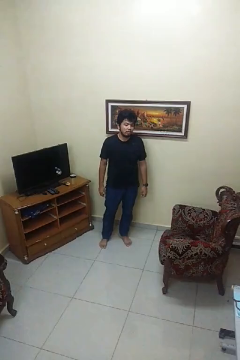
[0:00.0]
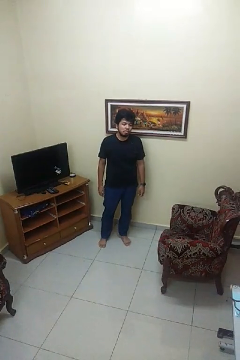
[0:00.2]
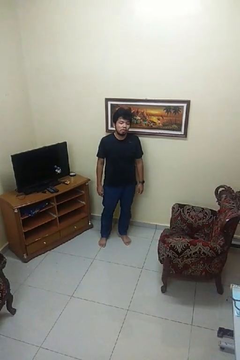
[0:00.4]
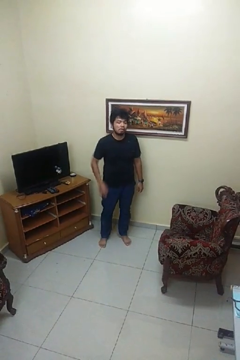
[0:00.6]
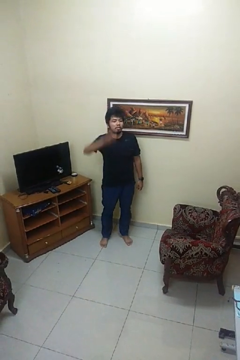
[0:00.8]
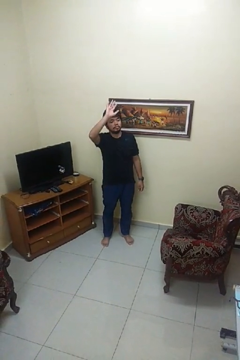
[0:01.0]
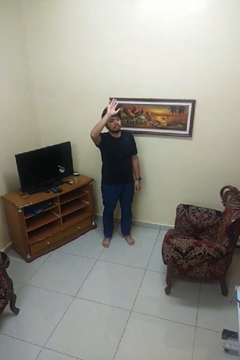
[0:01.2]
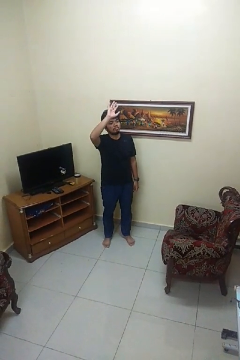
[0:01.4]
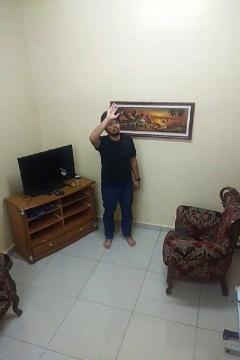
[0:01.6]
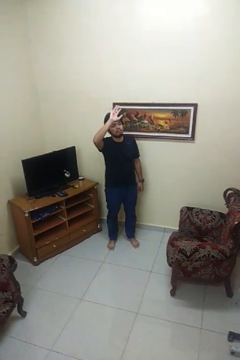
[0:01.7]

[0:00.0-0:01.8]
person gestures raise hand

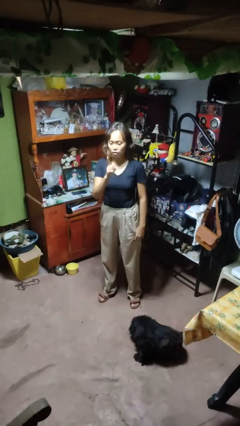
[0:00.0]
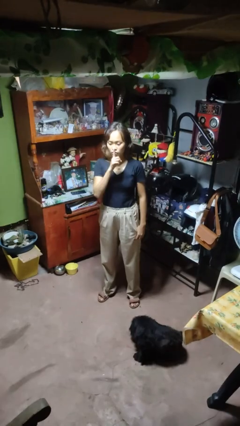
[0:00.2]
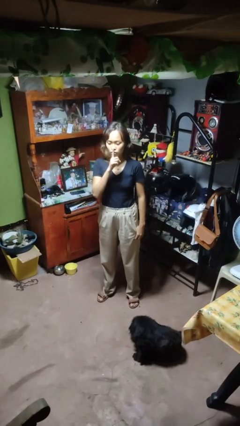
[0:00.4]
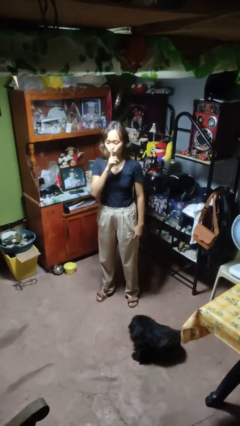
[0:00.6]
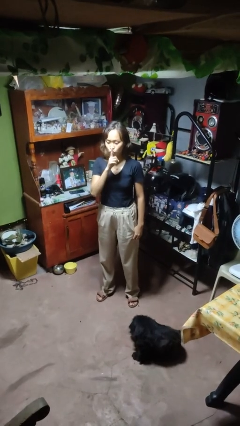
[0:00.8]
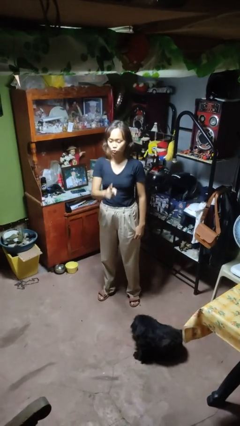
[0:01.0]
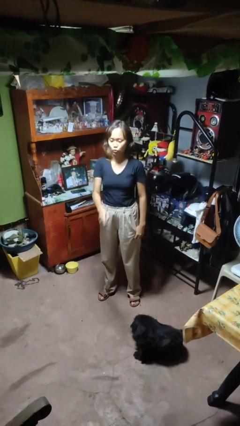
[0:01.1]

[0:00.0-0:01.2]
person gestures be quiet

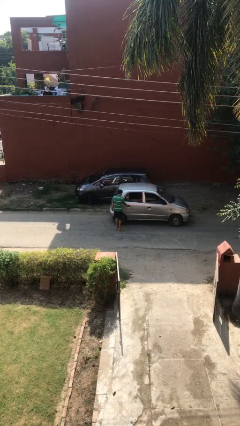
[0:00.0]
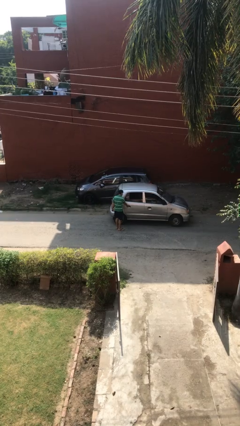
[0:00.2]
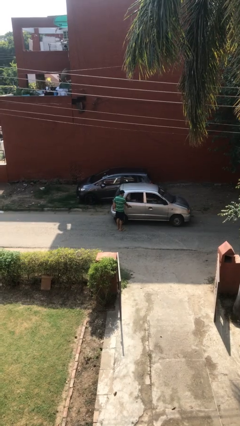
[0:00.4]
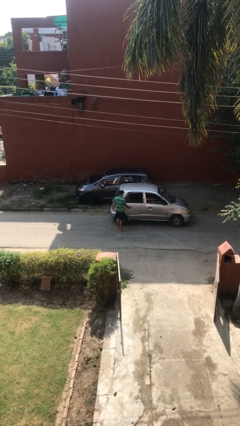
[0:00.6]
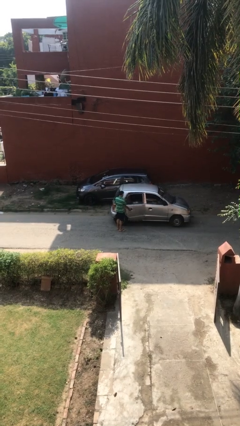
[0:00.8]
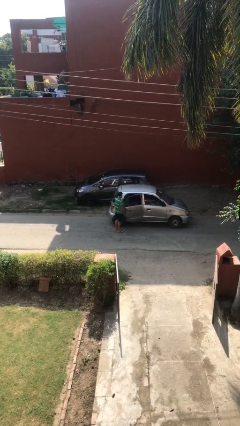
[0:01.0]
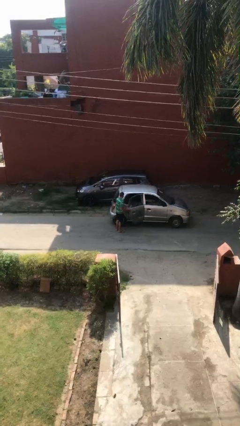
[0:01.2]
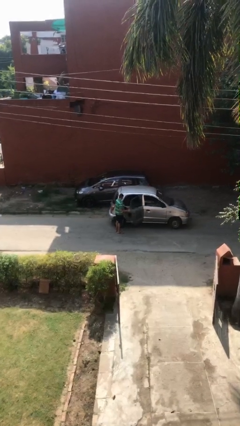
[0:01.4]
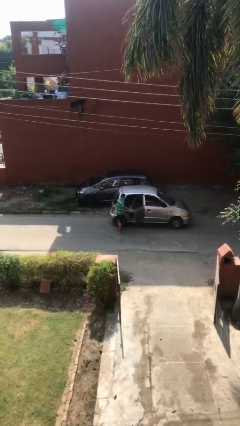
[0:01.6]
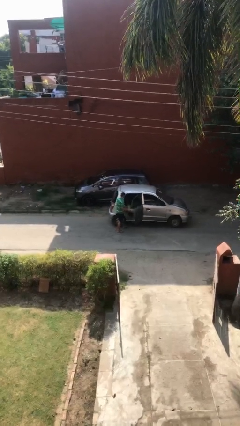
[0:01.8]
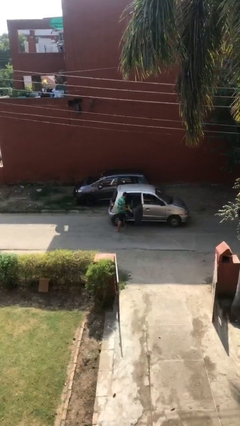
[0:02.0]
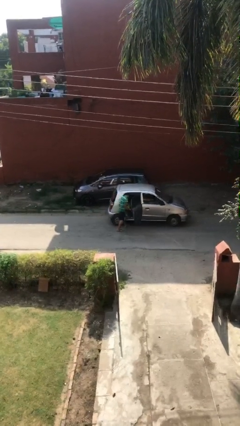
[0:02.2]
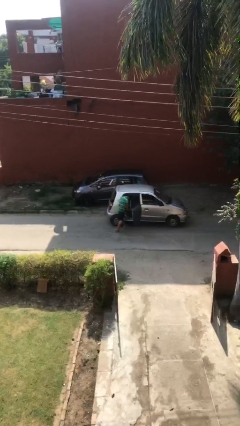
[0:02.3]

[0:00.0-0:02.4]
person opens car door

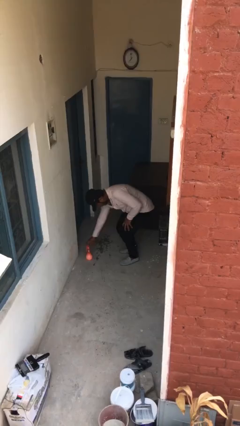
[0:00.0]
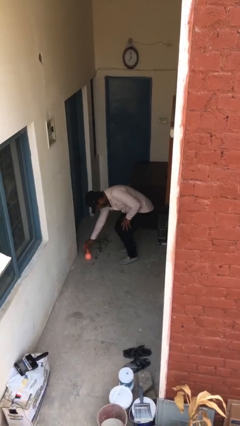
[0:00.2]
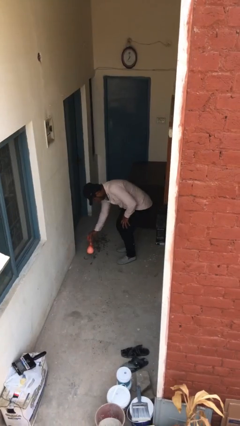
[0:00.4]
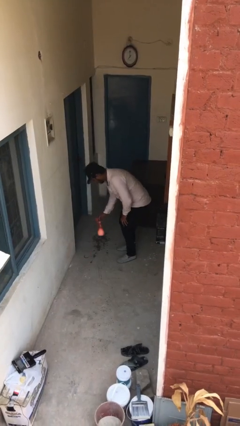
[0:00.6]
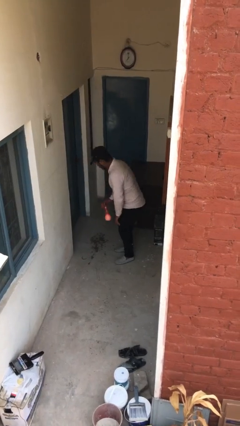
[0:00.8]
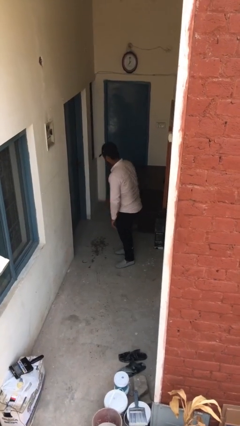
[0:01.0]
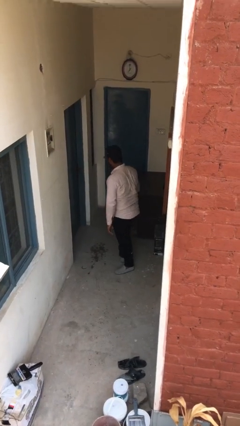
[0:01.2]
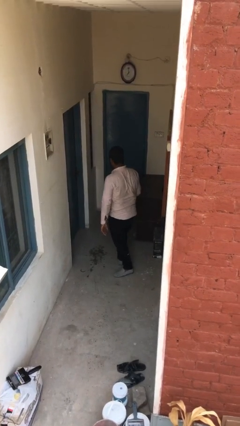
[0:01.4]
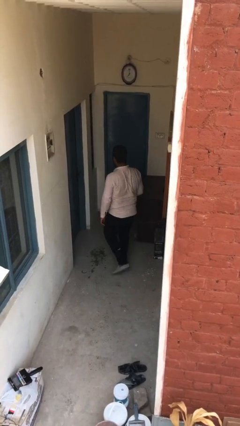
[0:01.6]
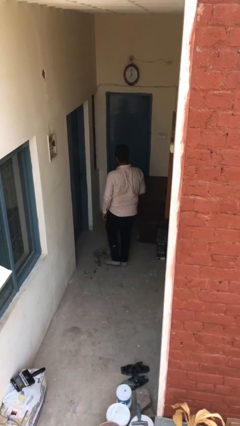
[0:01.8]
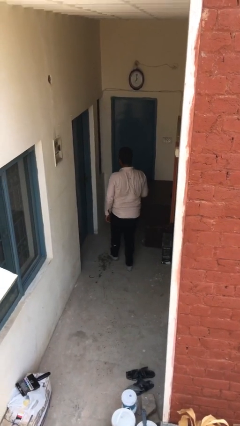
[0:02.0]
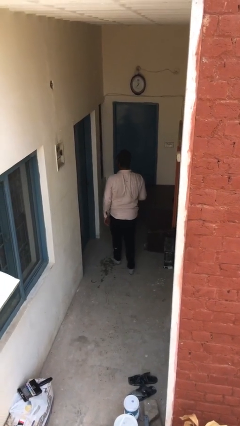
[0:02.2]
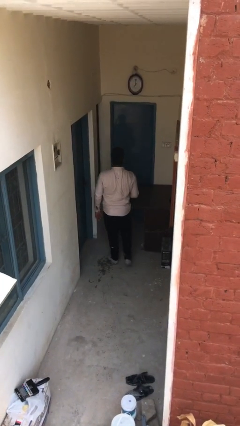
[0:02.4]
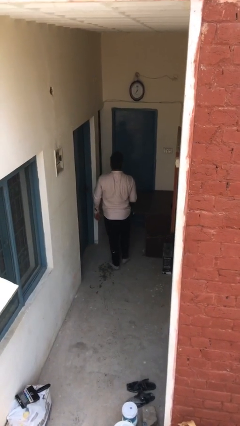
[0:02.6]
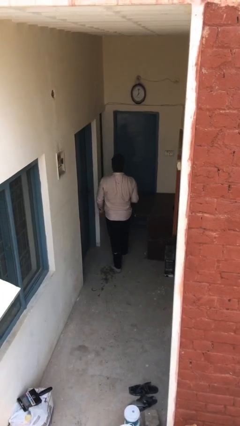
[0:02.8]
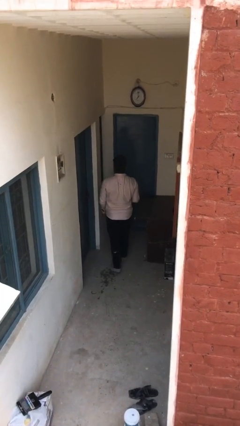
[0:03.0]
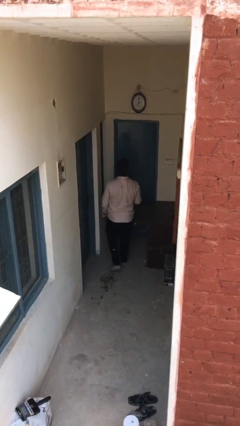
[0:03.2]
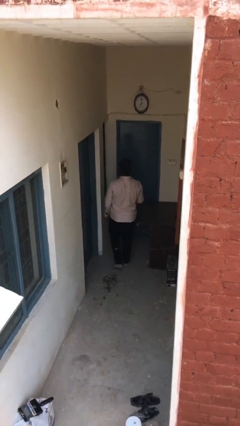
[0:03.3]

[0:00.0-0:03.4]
person picks up object from floor

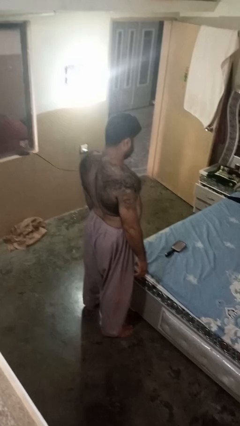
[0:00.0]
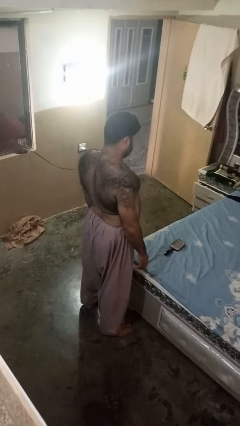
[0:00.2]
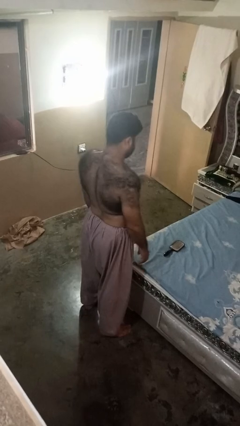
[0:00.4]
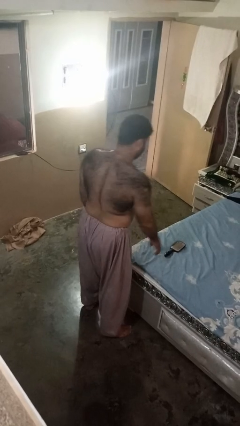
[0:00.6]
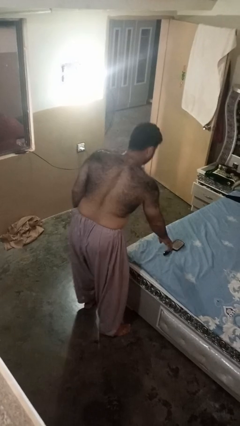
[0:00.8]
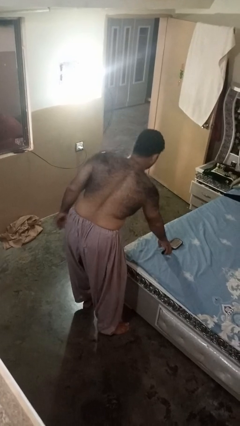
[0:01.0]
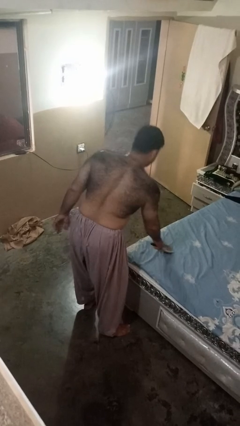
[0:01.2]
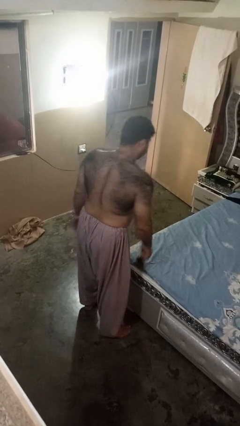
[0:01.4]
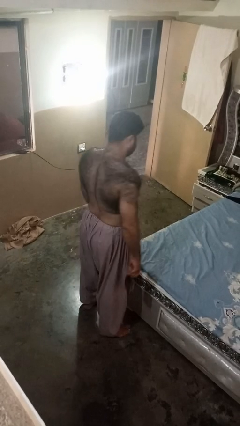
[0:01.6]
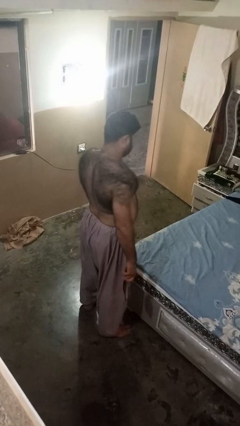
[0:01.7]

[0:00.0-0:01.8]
person picks up object from bed

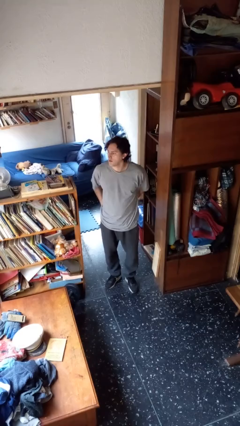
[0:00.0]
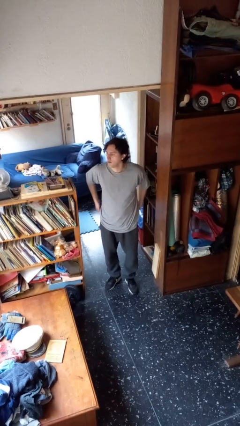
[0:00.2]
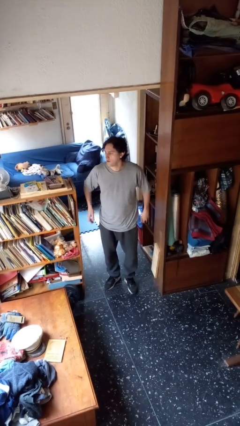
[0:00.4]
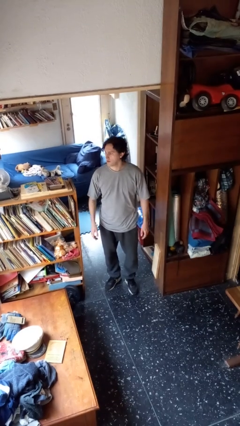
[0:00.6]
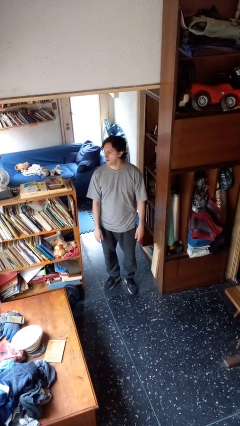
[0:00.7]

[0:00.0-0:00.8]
person puts hands in back pockets

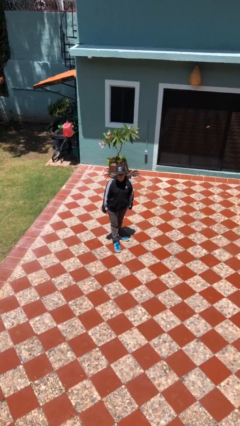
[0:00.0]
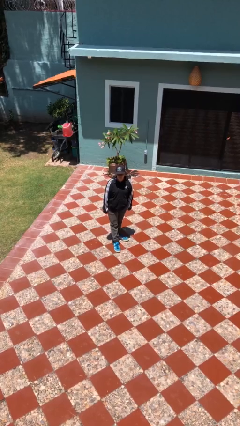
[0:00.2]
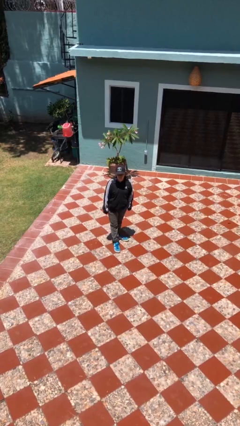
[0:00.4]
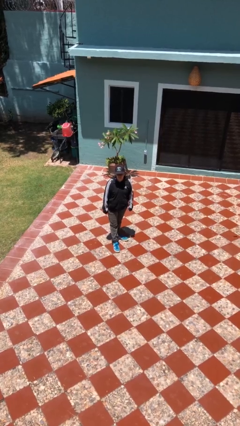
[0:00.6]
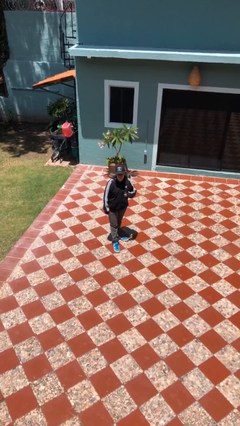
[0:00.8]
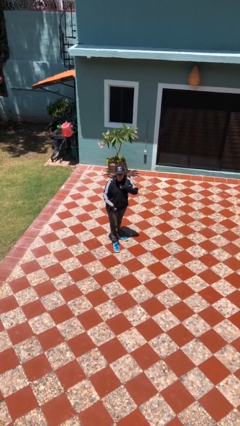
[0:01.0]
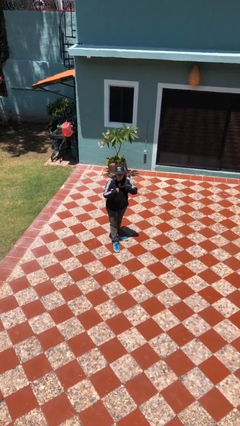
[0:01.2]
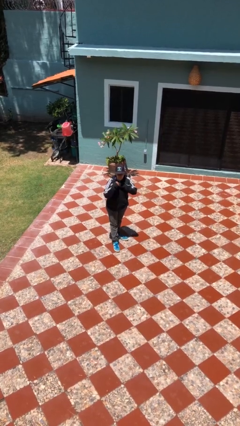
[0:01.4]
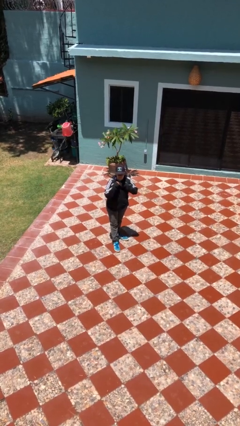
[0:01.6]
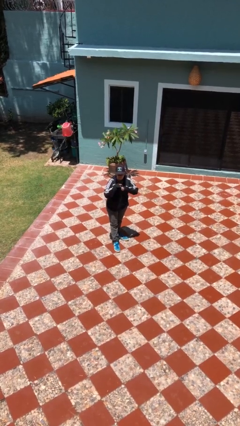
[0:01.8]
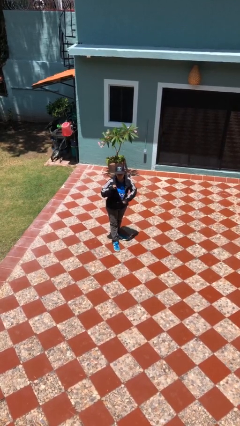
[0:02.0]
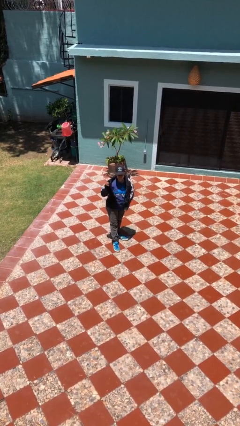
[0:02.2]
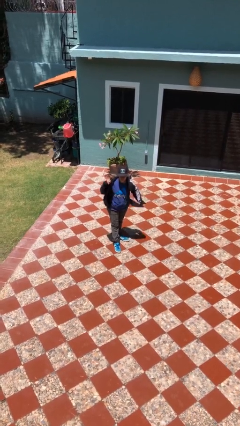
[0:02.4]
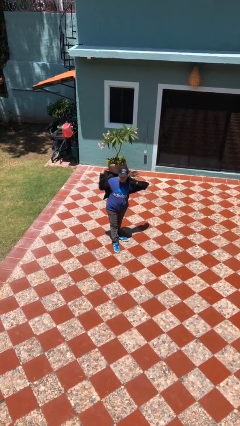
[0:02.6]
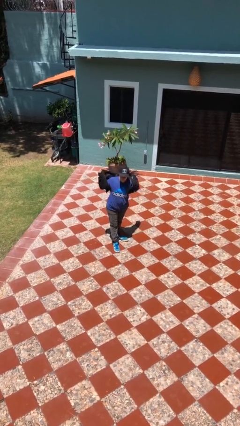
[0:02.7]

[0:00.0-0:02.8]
person unzips jacket

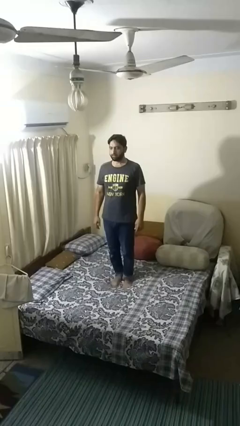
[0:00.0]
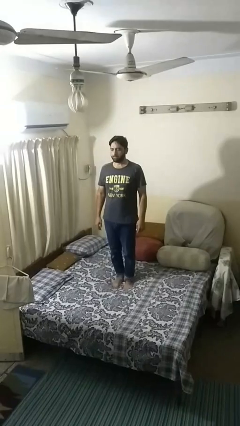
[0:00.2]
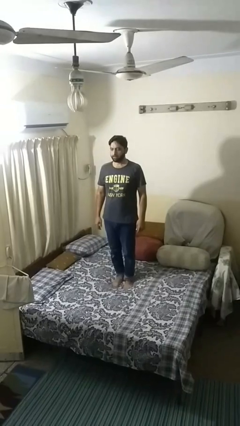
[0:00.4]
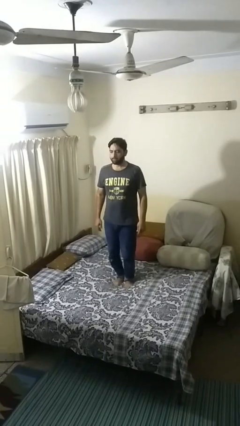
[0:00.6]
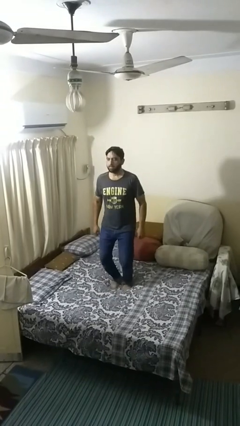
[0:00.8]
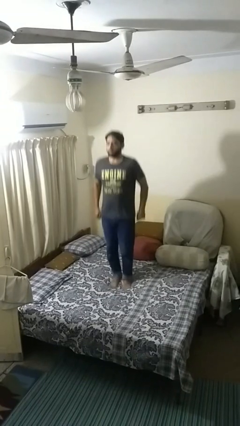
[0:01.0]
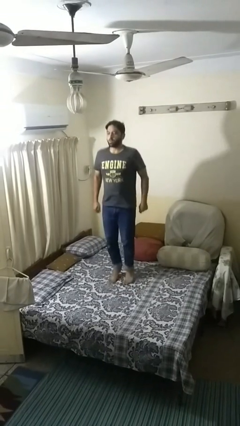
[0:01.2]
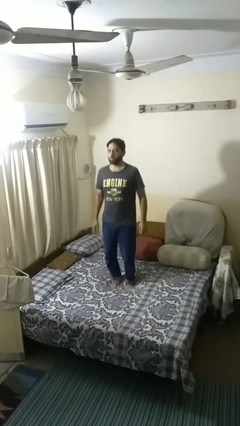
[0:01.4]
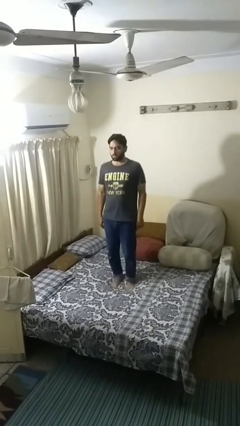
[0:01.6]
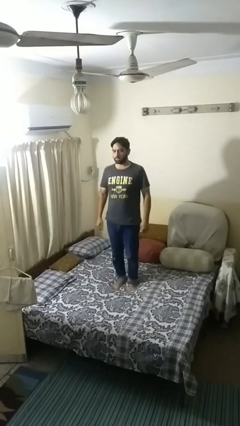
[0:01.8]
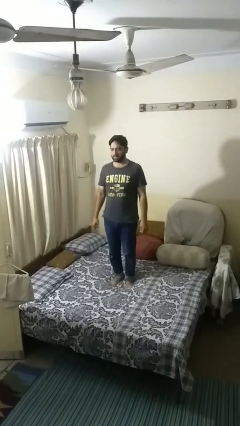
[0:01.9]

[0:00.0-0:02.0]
person jumps on bed

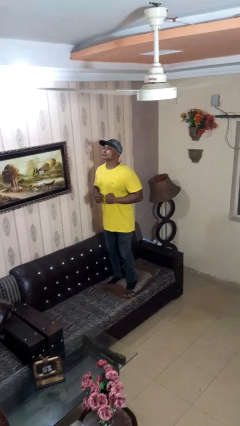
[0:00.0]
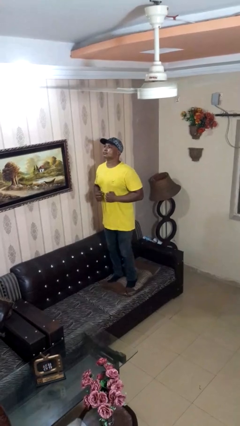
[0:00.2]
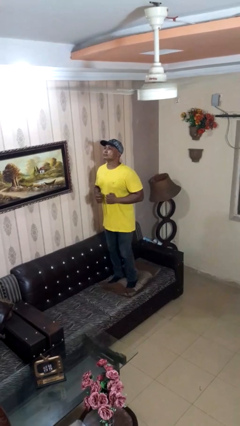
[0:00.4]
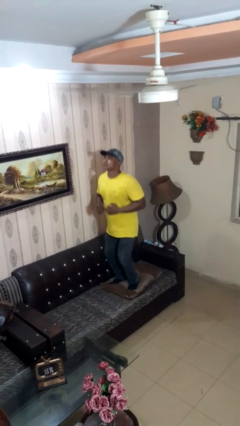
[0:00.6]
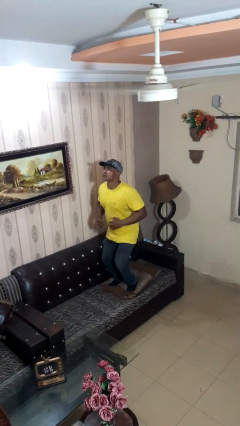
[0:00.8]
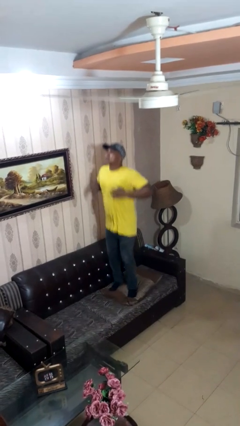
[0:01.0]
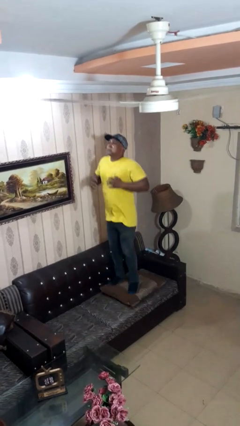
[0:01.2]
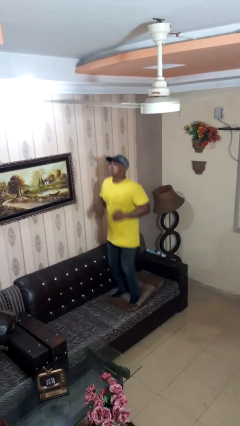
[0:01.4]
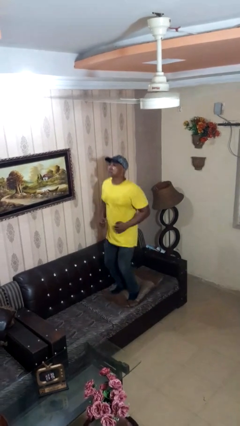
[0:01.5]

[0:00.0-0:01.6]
person jumps on couch
